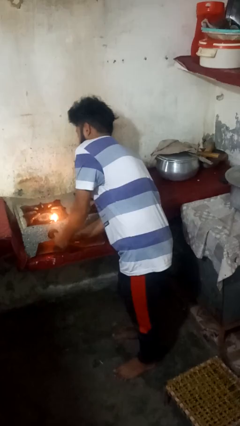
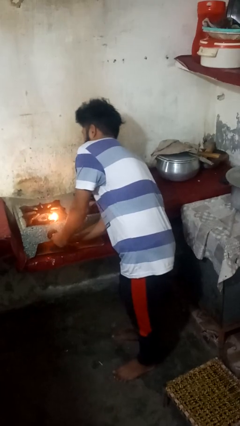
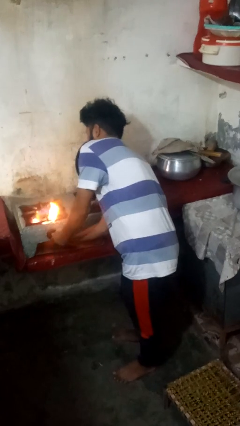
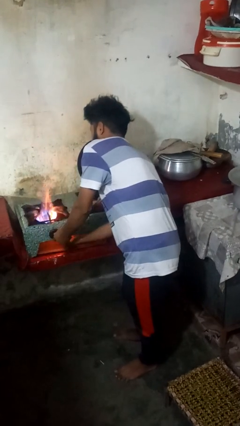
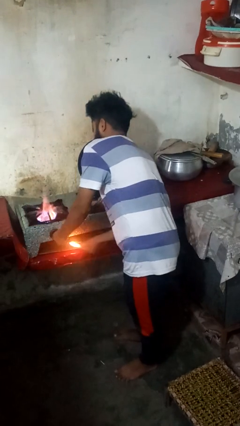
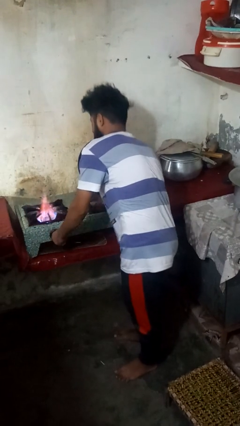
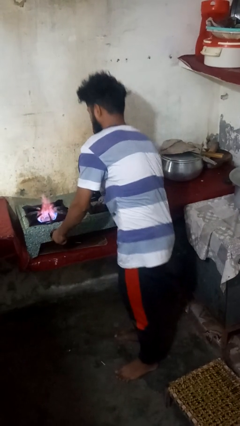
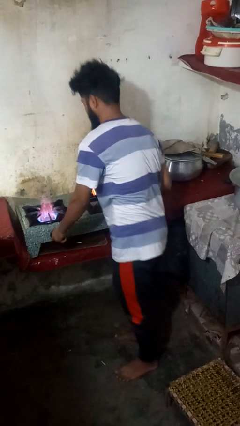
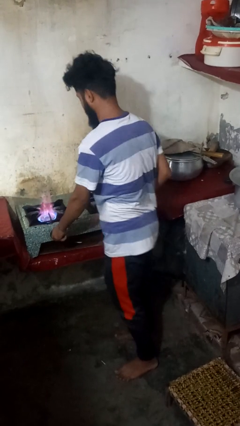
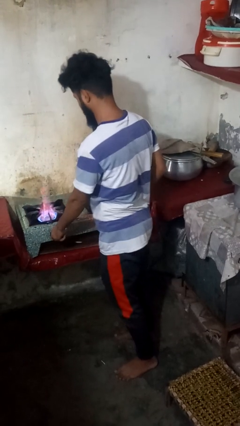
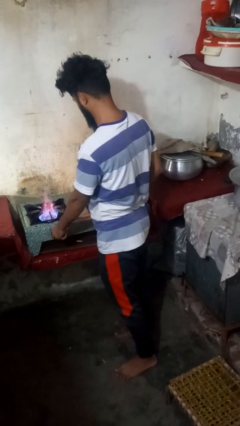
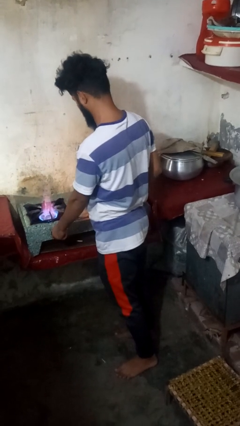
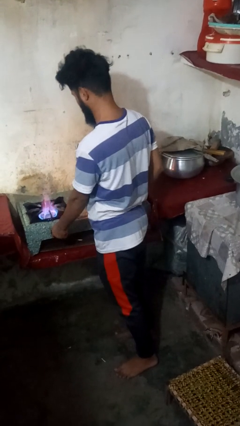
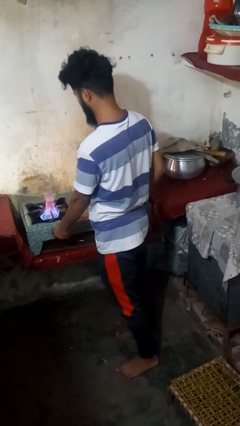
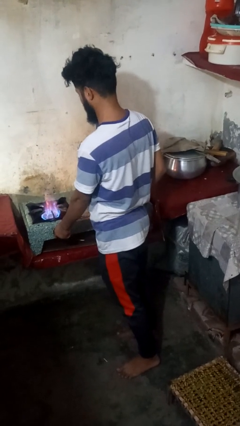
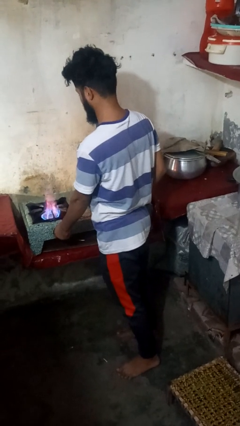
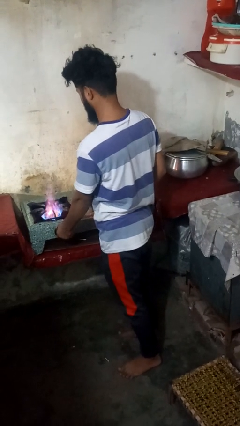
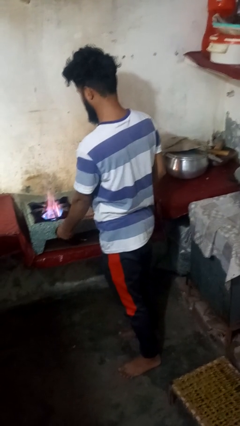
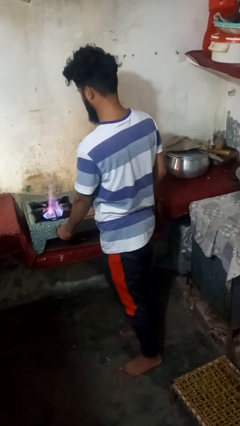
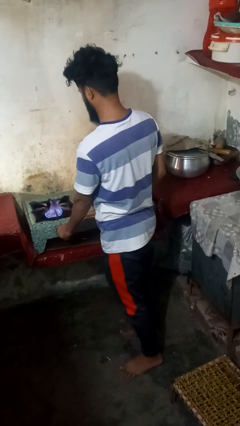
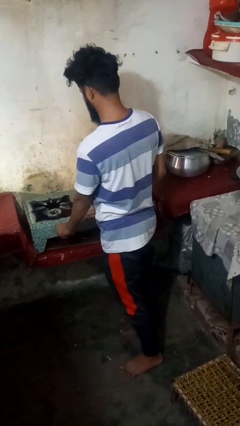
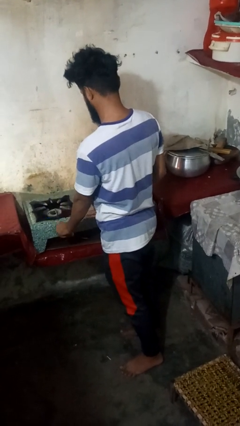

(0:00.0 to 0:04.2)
person turns on stovetop

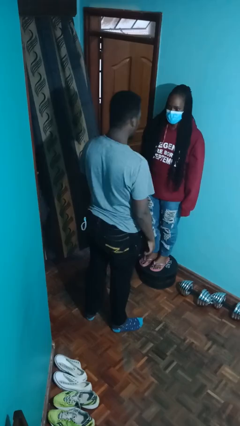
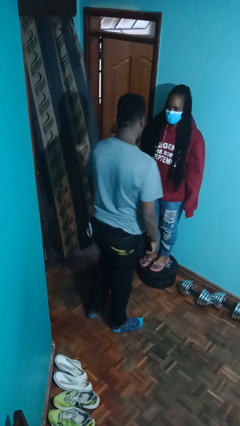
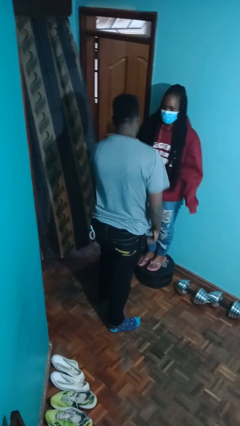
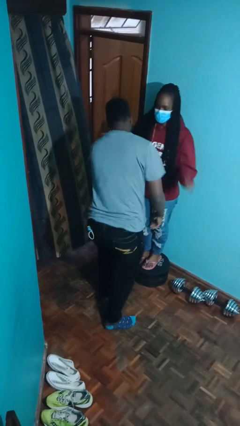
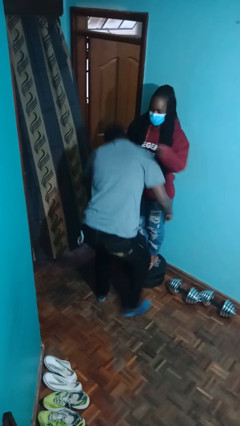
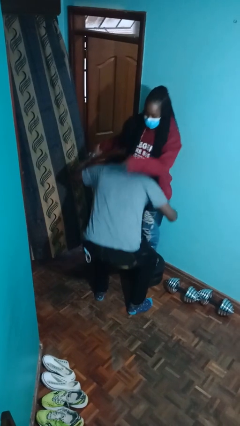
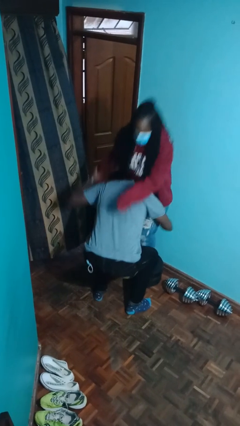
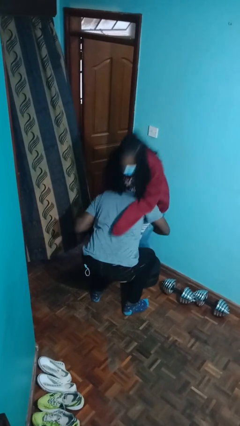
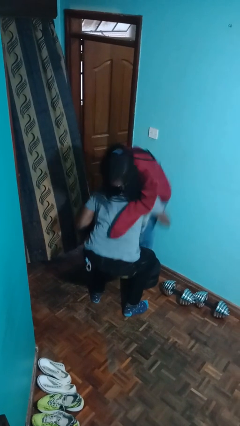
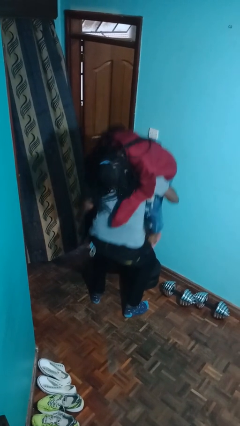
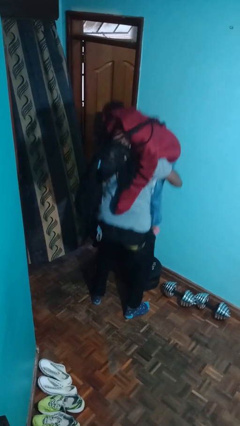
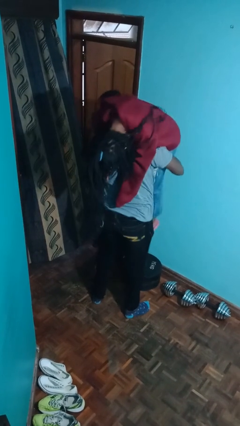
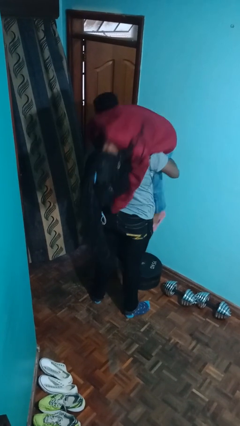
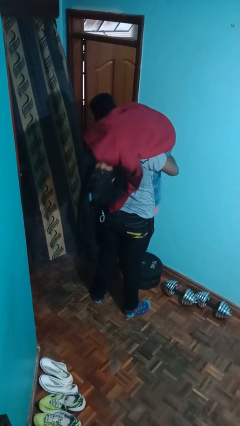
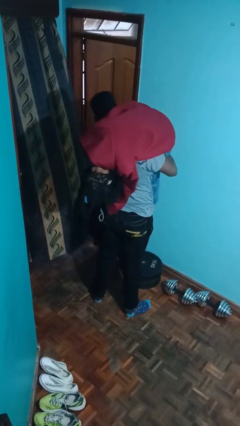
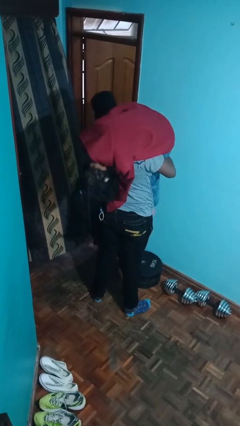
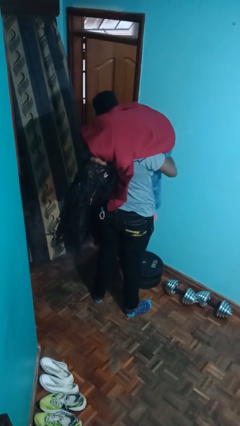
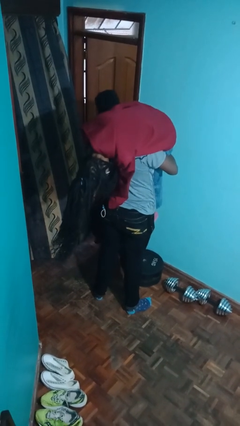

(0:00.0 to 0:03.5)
person carries person over shoulder

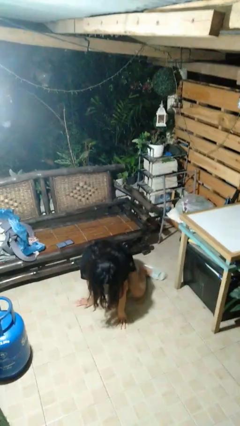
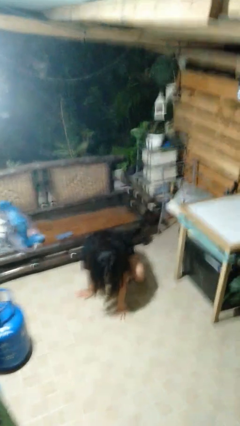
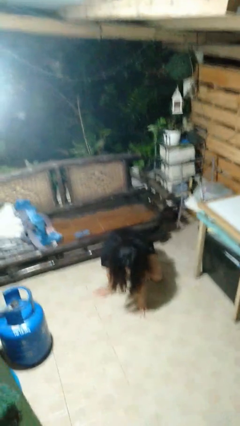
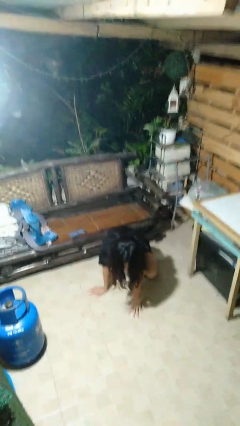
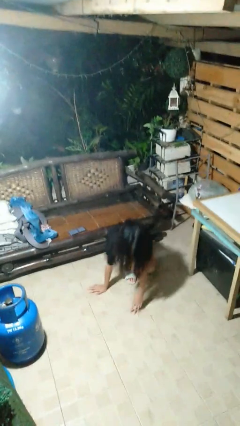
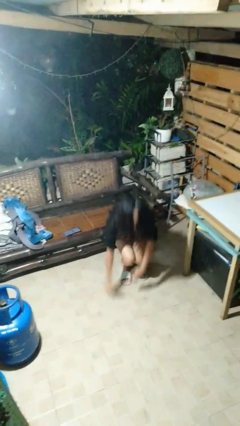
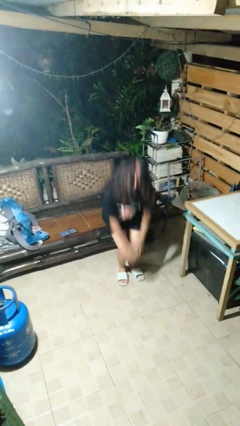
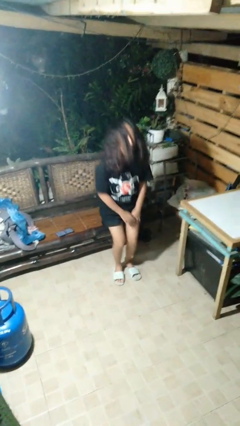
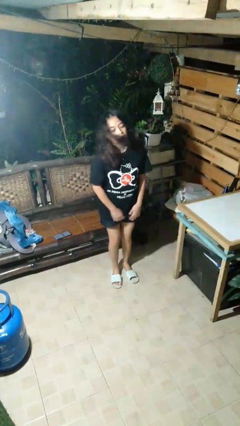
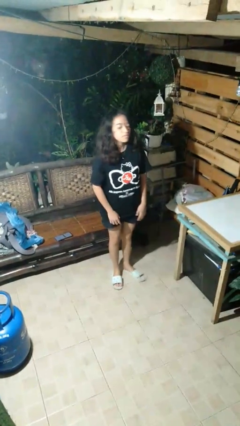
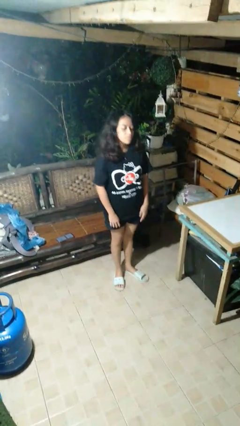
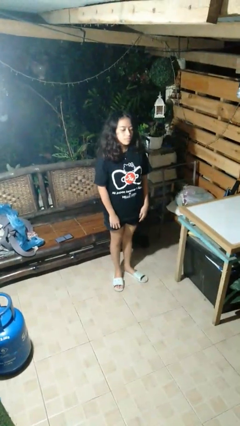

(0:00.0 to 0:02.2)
person stands up from floor

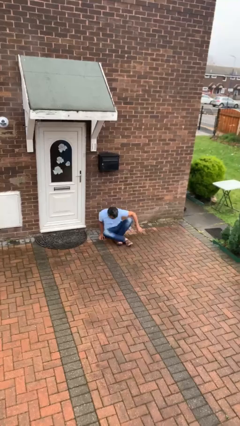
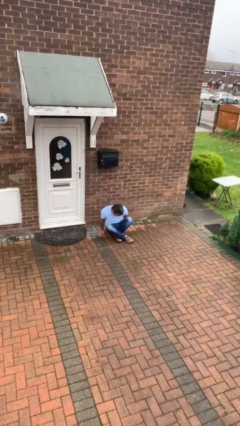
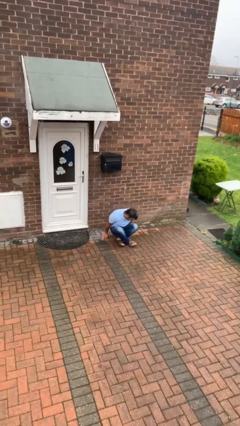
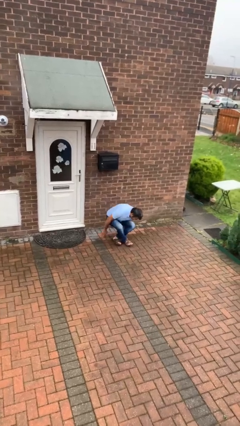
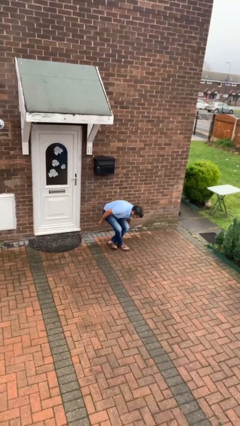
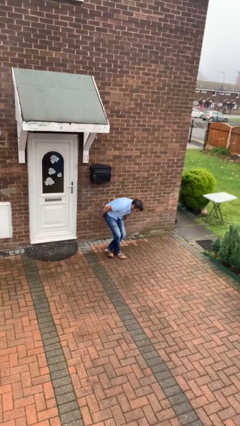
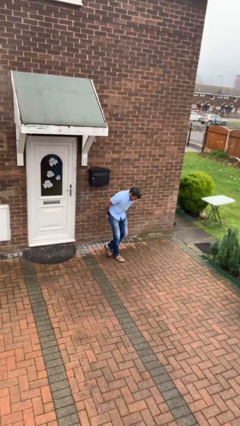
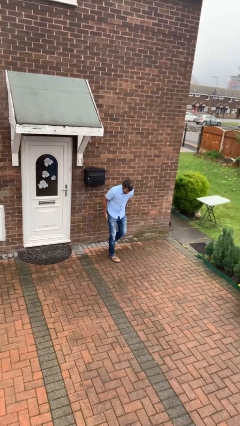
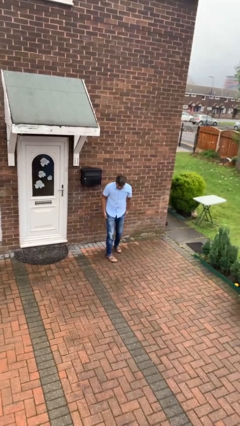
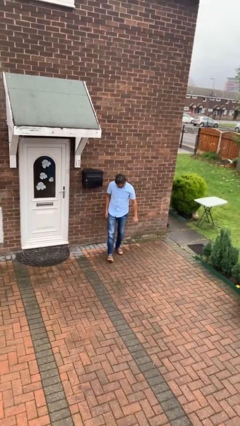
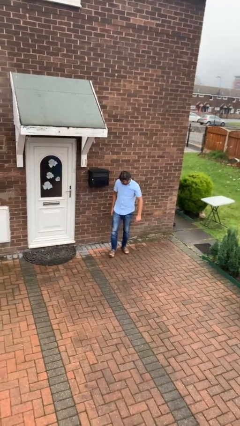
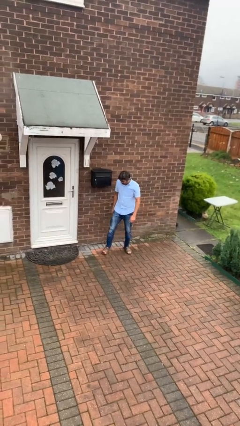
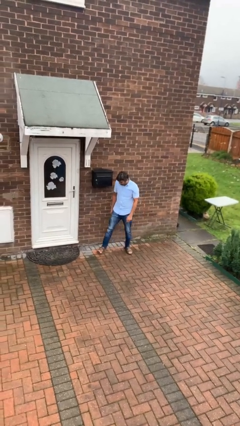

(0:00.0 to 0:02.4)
person stands up

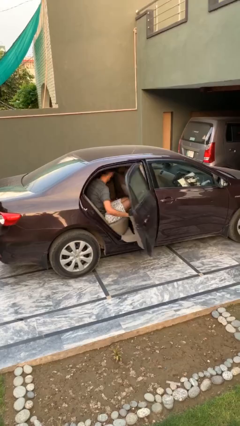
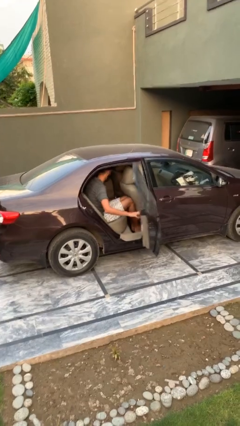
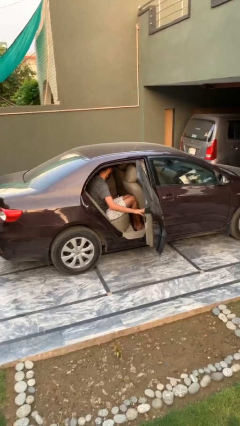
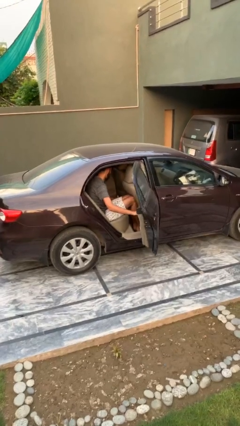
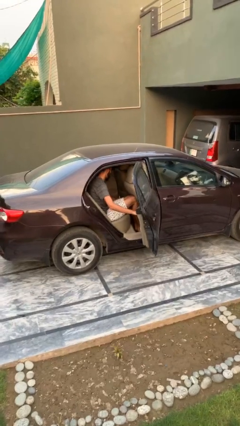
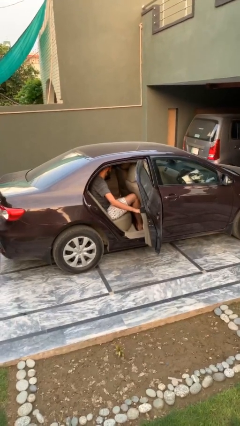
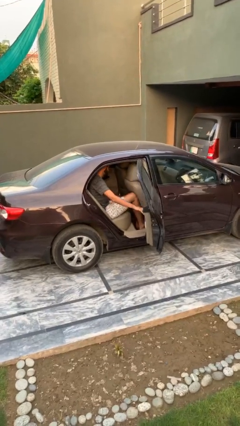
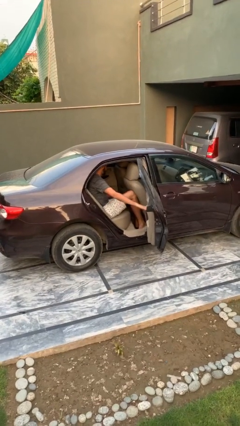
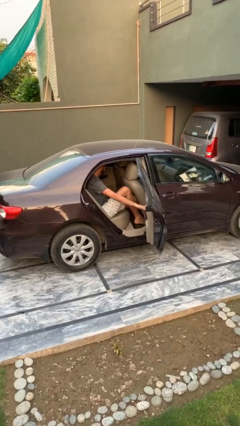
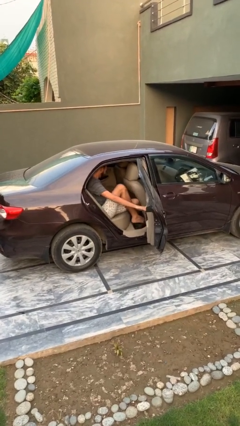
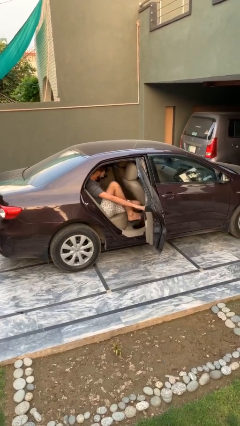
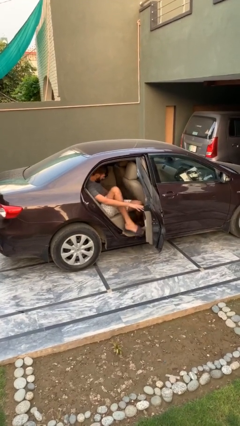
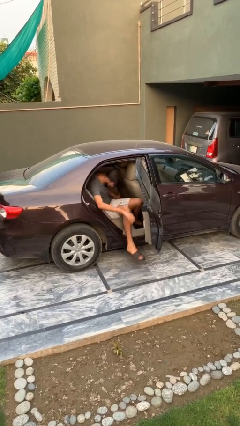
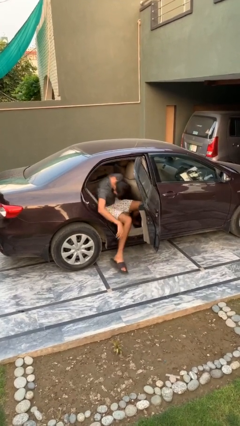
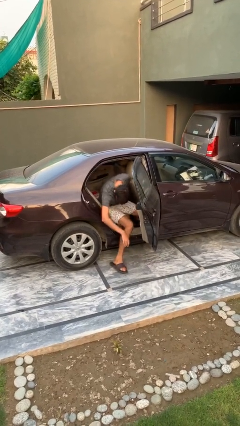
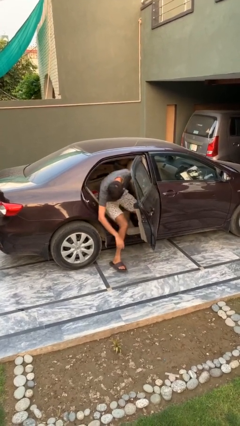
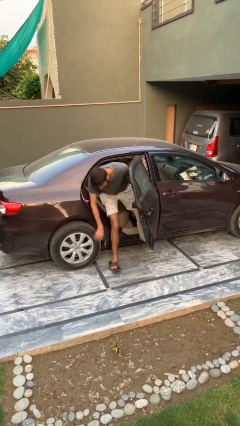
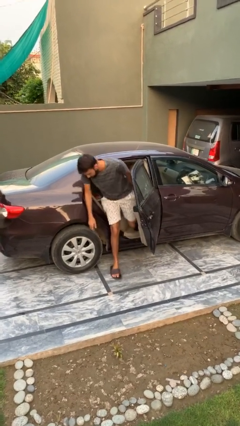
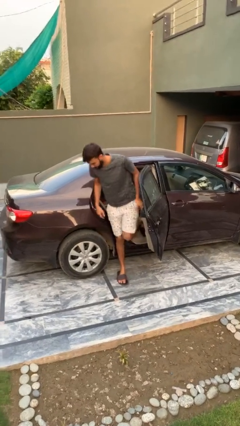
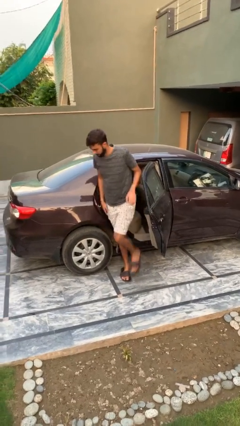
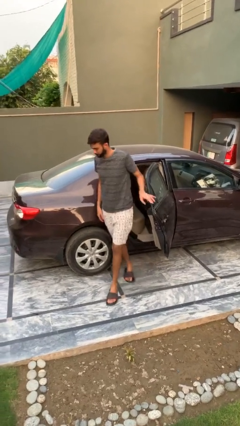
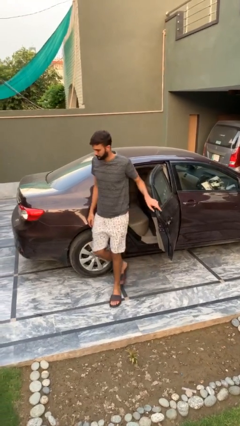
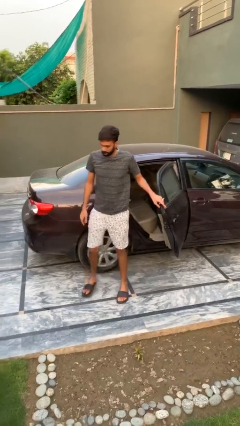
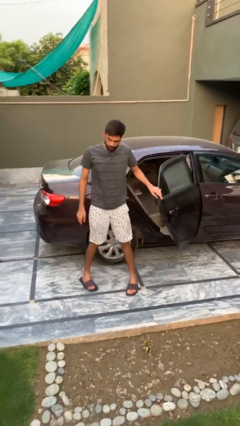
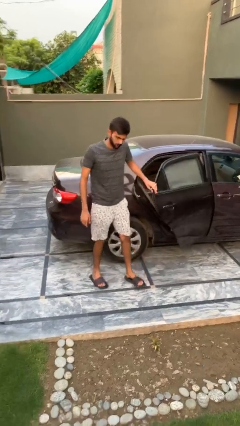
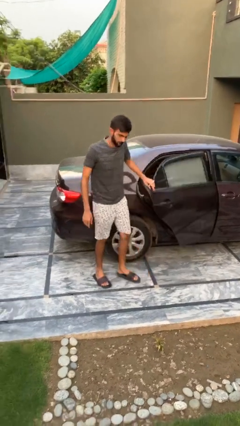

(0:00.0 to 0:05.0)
person exits car
